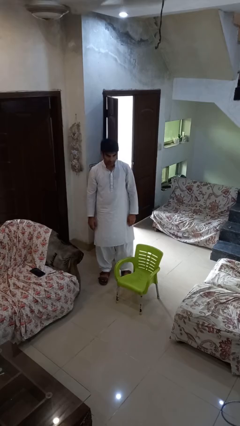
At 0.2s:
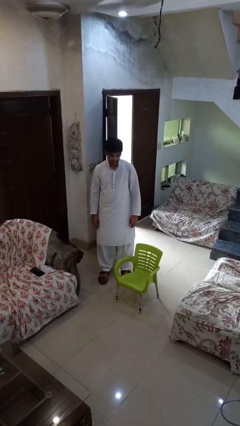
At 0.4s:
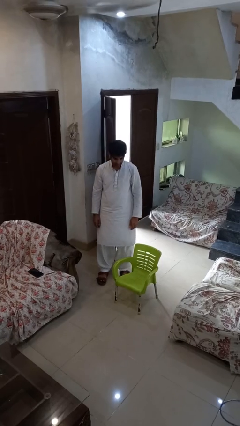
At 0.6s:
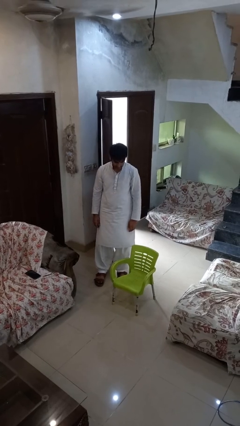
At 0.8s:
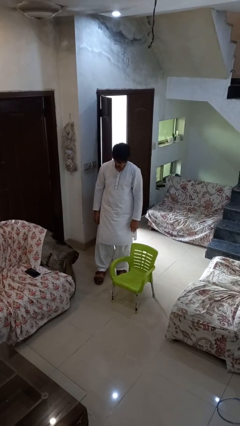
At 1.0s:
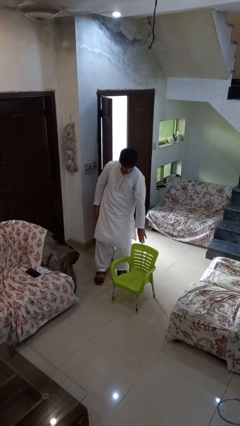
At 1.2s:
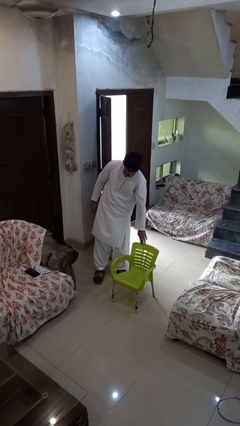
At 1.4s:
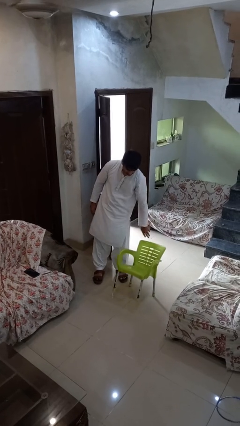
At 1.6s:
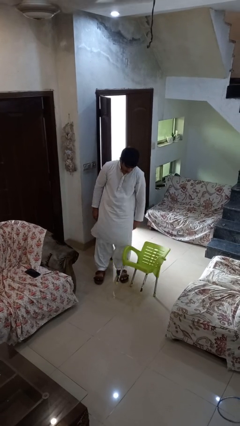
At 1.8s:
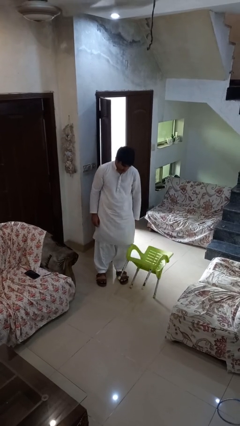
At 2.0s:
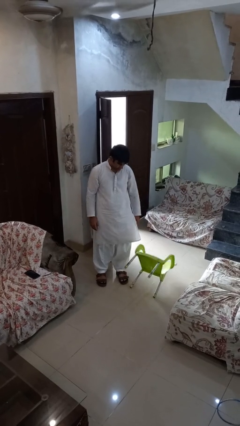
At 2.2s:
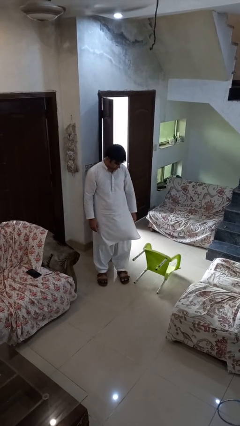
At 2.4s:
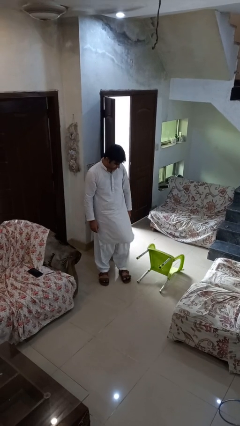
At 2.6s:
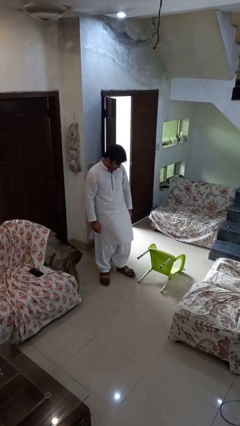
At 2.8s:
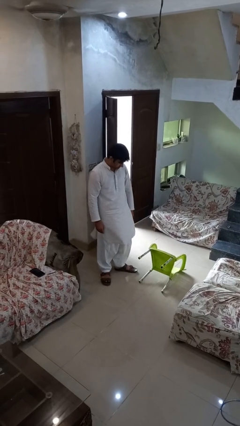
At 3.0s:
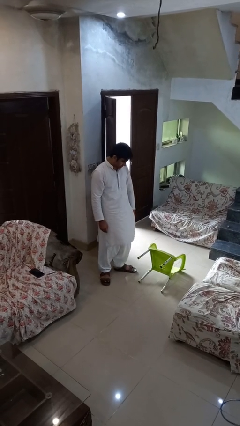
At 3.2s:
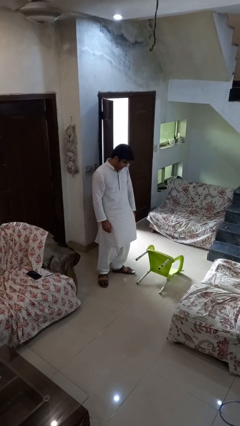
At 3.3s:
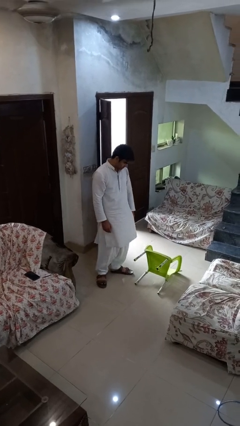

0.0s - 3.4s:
person knocks over furniture

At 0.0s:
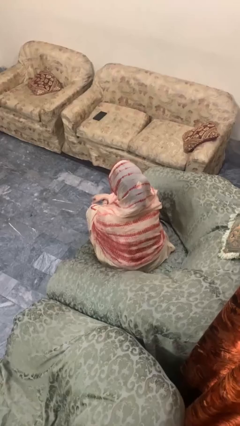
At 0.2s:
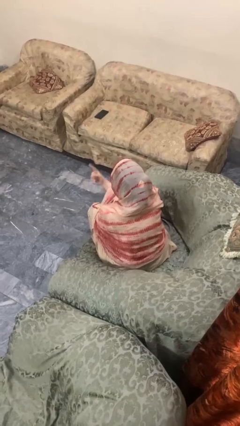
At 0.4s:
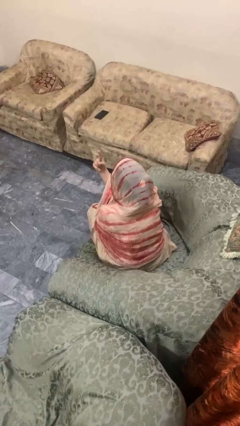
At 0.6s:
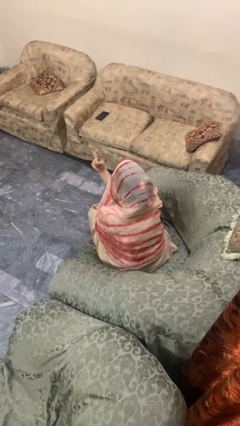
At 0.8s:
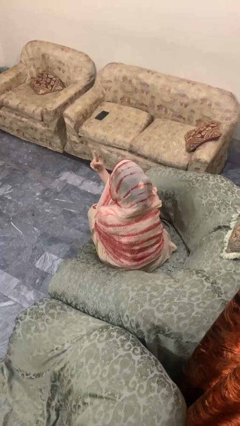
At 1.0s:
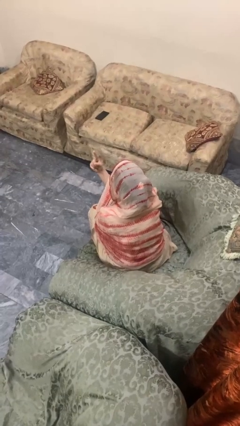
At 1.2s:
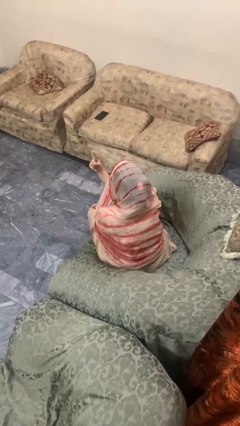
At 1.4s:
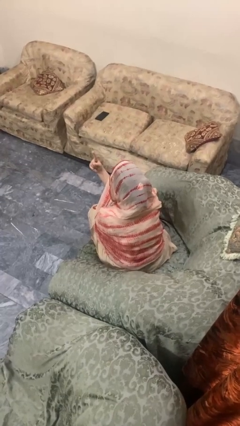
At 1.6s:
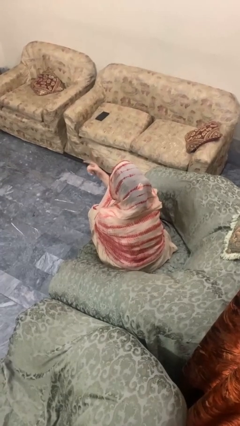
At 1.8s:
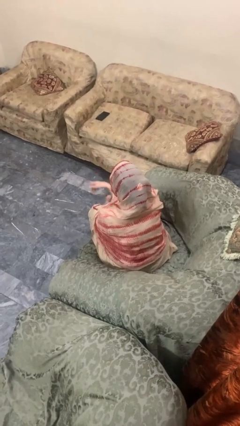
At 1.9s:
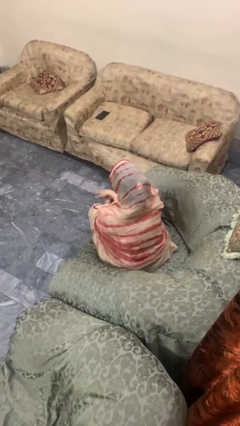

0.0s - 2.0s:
person gestures number one

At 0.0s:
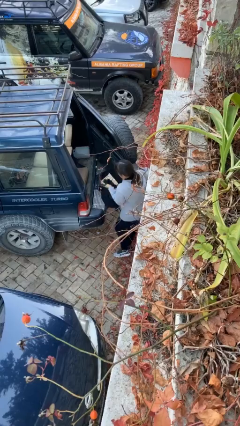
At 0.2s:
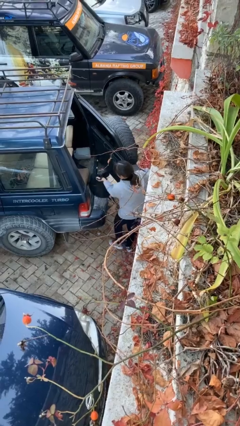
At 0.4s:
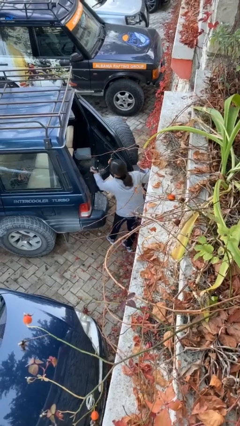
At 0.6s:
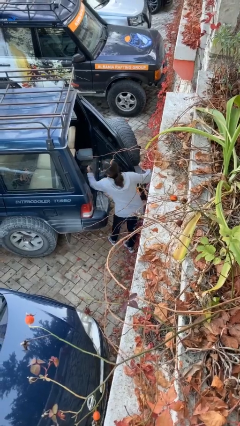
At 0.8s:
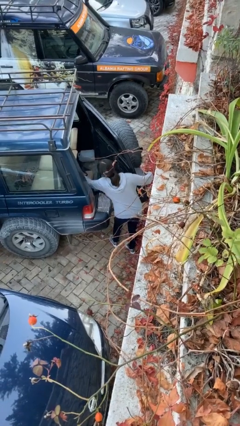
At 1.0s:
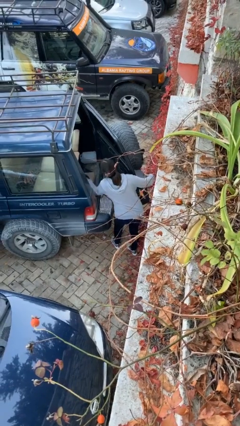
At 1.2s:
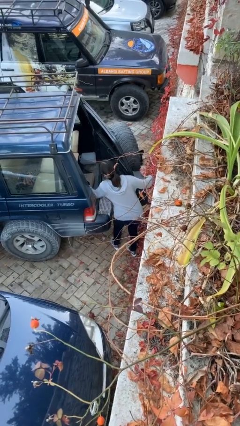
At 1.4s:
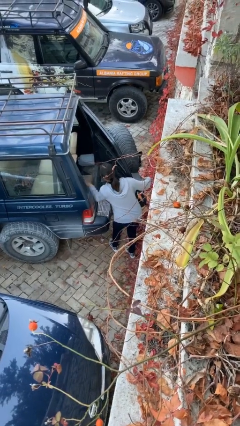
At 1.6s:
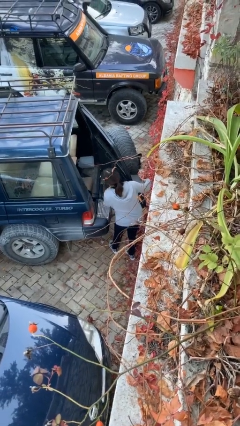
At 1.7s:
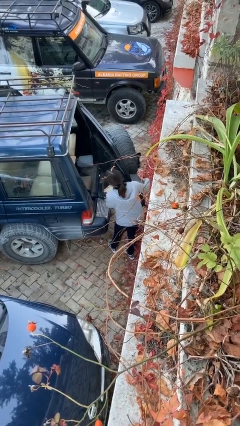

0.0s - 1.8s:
person loads car

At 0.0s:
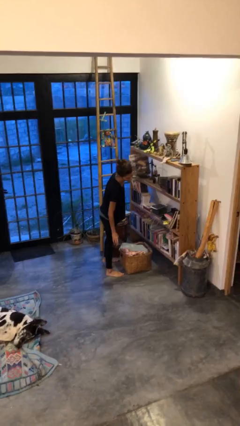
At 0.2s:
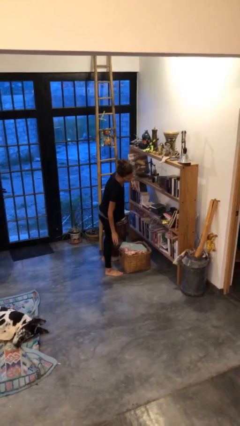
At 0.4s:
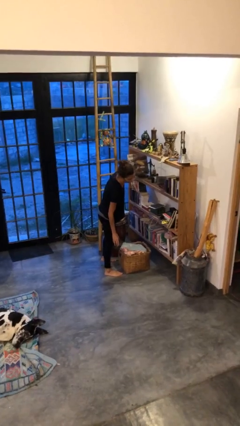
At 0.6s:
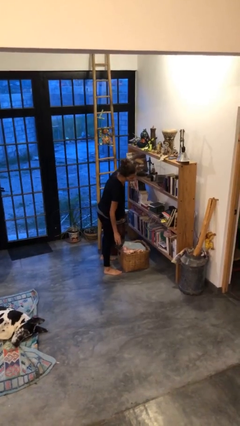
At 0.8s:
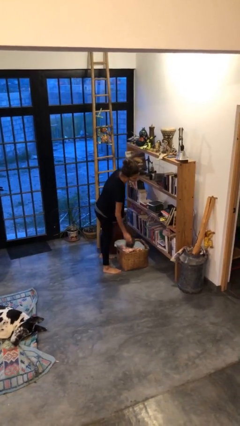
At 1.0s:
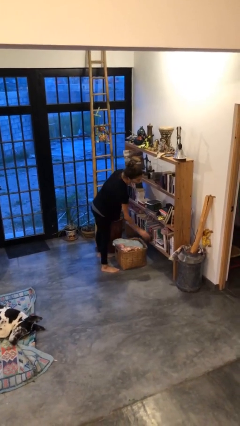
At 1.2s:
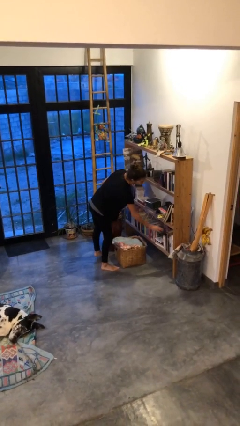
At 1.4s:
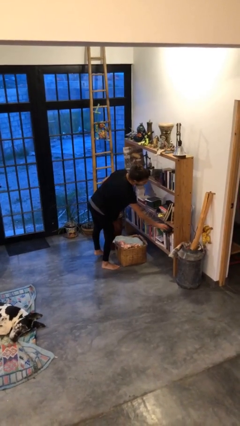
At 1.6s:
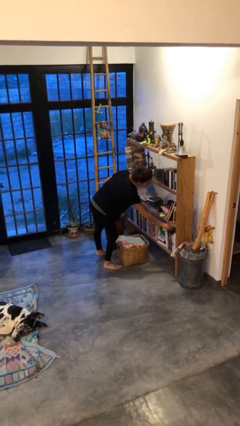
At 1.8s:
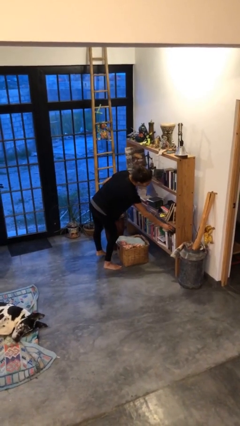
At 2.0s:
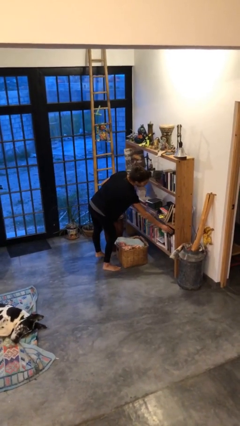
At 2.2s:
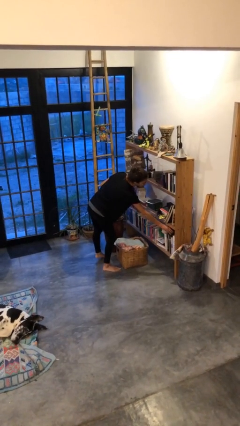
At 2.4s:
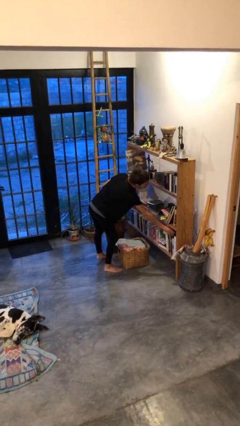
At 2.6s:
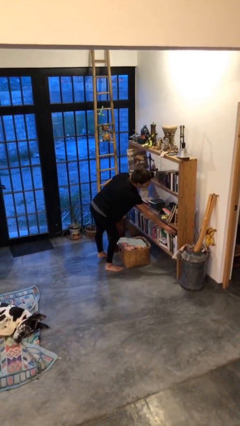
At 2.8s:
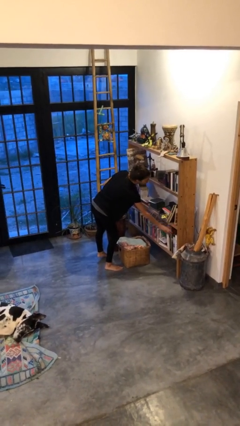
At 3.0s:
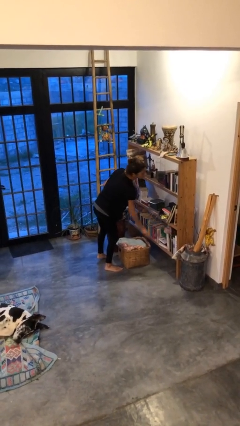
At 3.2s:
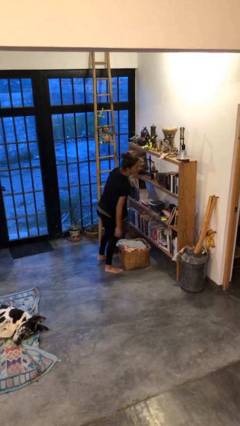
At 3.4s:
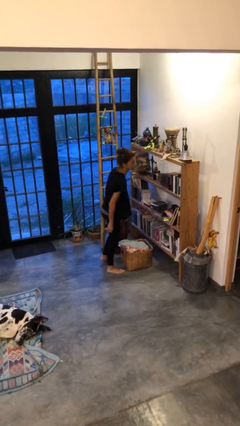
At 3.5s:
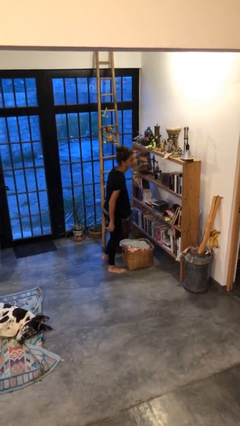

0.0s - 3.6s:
person puts down object into cabinet

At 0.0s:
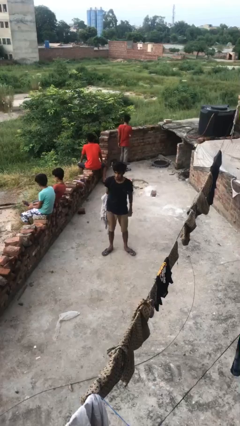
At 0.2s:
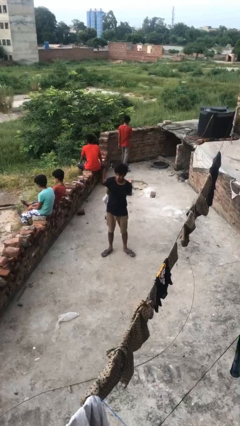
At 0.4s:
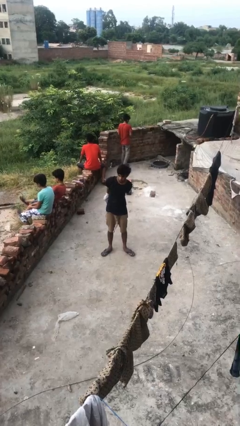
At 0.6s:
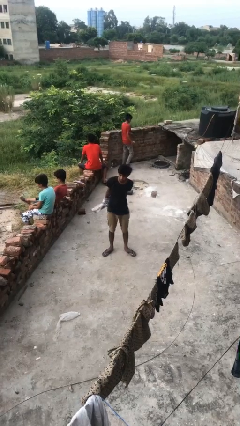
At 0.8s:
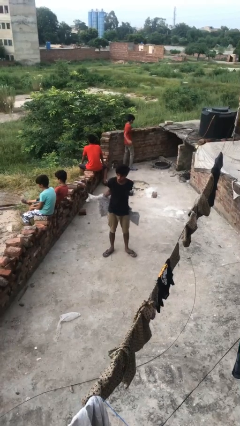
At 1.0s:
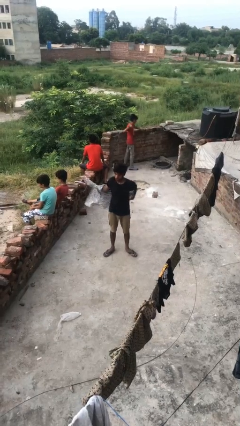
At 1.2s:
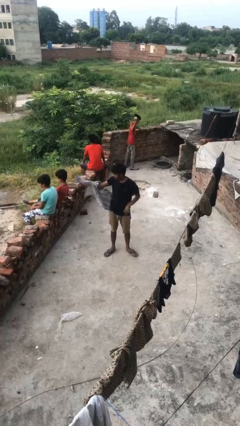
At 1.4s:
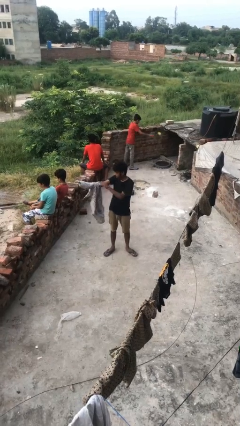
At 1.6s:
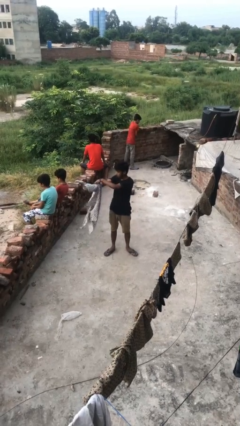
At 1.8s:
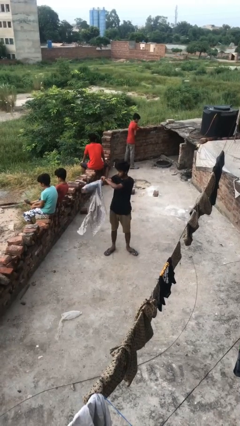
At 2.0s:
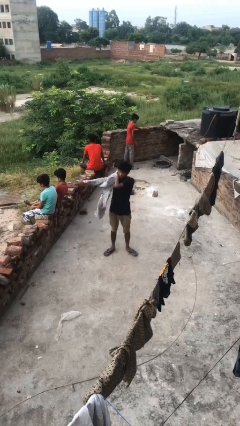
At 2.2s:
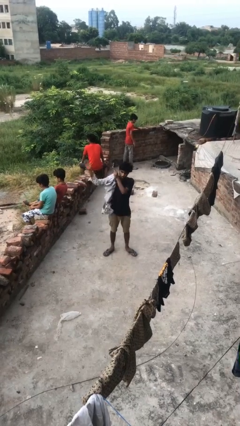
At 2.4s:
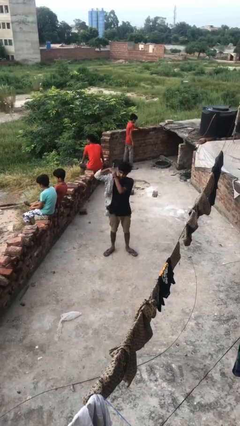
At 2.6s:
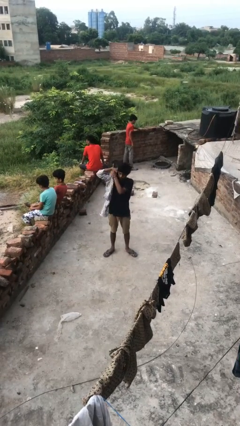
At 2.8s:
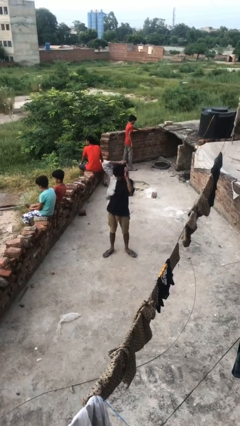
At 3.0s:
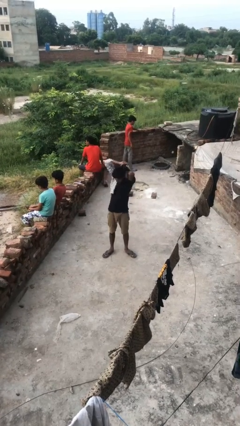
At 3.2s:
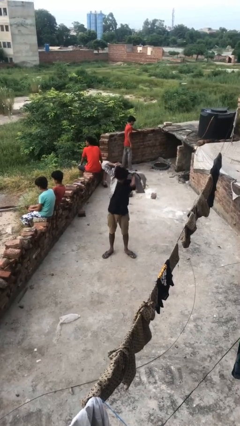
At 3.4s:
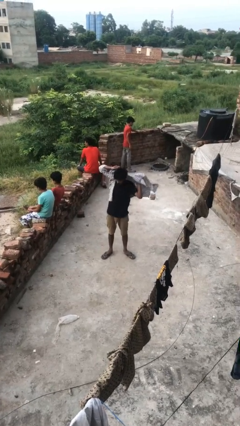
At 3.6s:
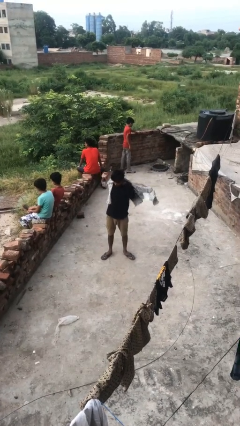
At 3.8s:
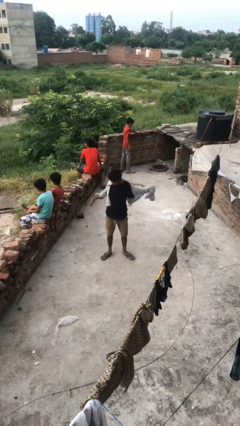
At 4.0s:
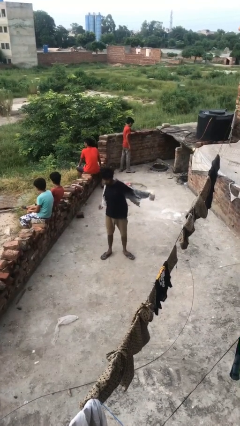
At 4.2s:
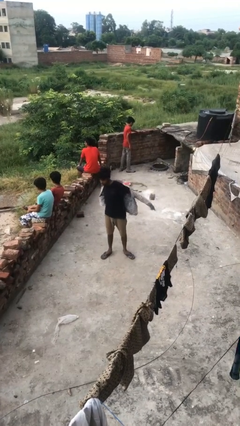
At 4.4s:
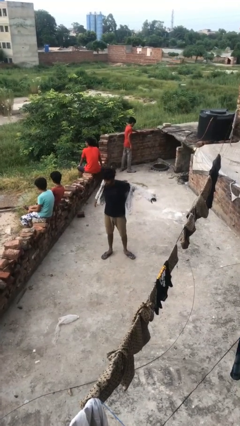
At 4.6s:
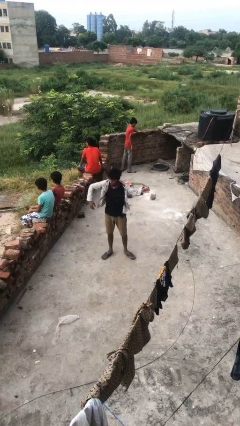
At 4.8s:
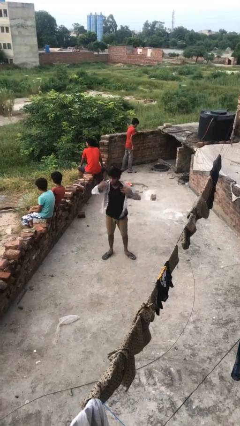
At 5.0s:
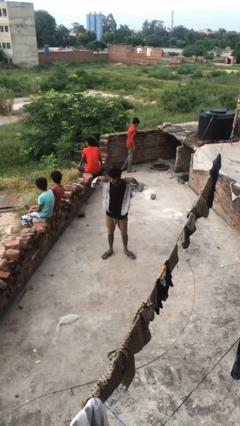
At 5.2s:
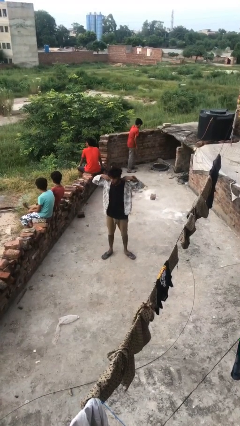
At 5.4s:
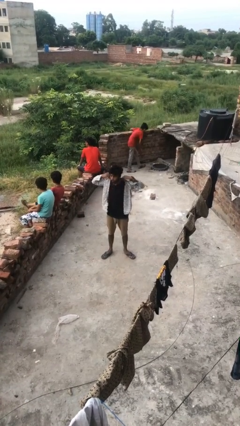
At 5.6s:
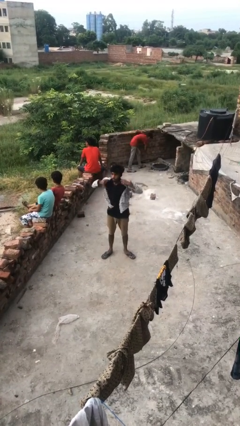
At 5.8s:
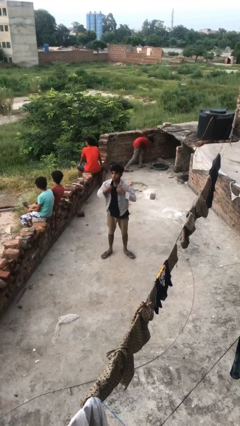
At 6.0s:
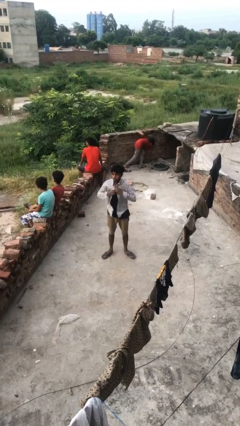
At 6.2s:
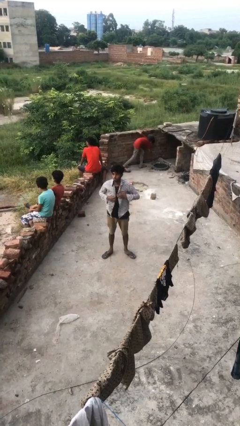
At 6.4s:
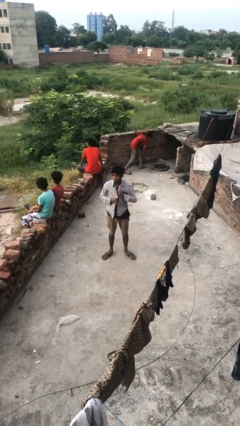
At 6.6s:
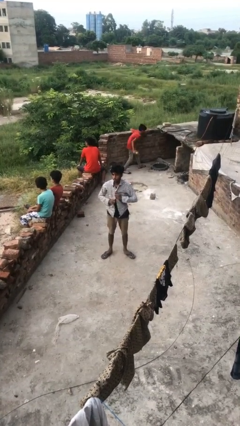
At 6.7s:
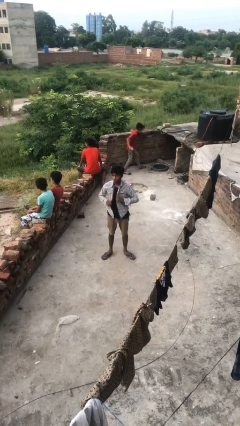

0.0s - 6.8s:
person puts on shirt
